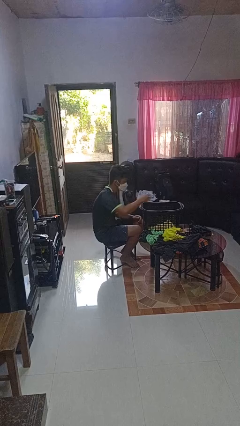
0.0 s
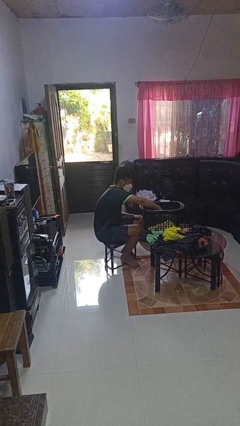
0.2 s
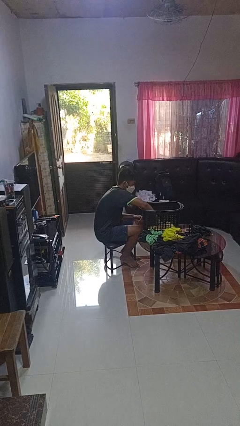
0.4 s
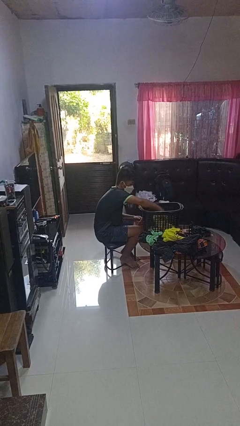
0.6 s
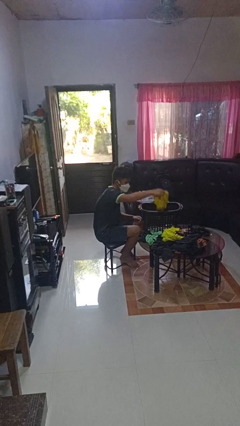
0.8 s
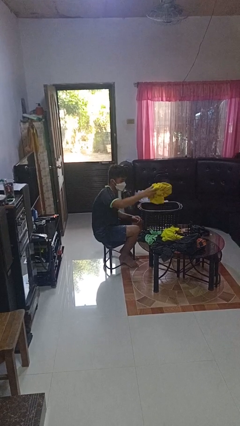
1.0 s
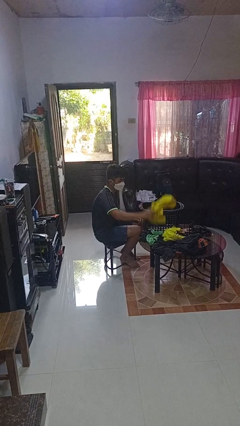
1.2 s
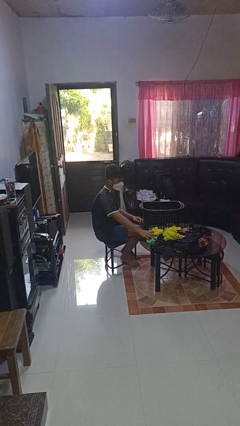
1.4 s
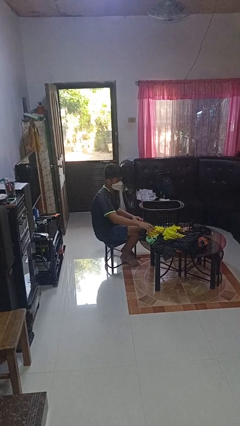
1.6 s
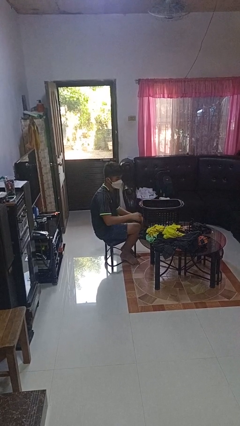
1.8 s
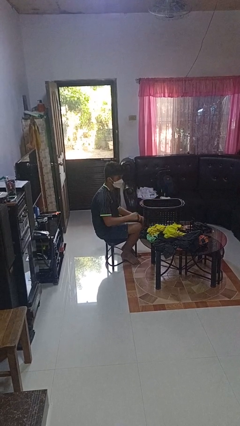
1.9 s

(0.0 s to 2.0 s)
person takes object from basket

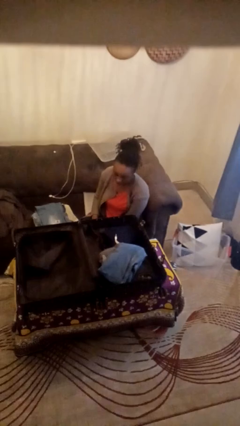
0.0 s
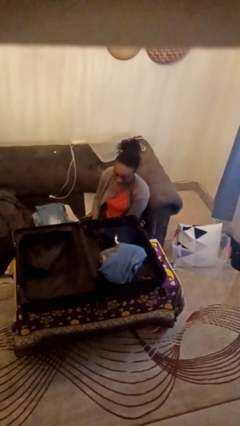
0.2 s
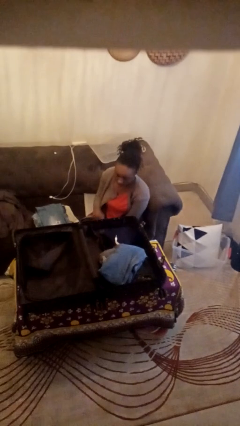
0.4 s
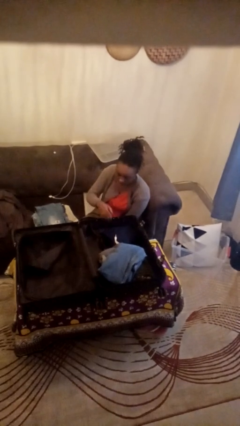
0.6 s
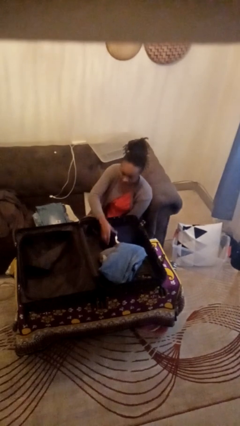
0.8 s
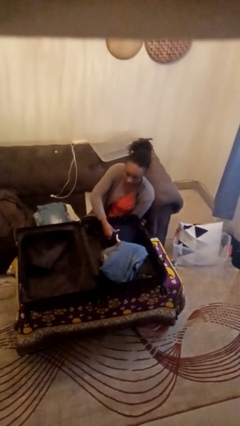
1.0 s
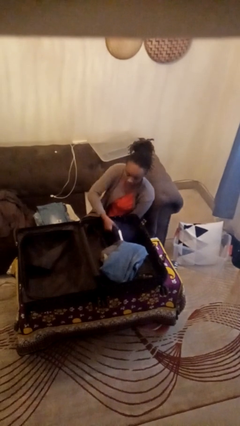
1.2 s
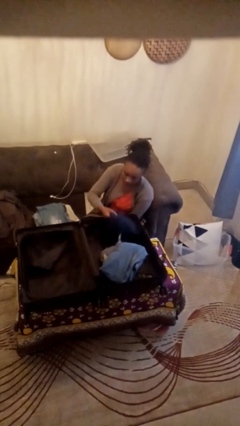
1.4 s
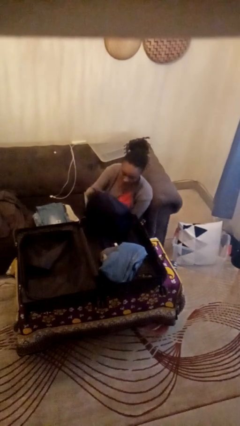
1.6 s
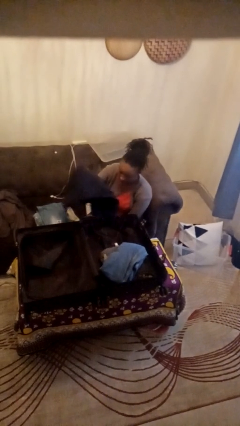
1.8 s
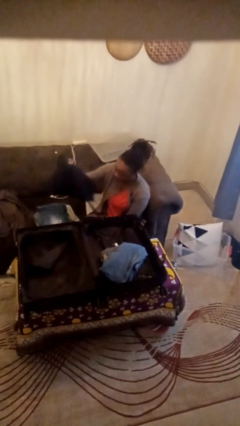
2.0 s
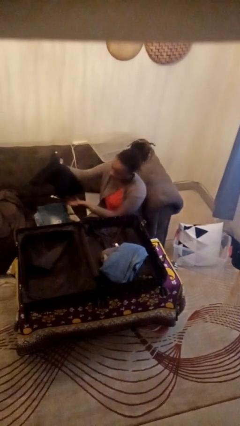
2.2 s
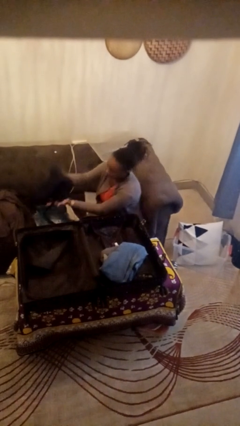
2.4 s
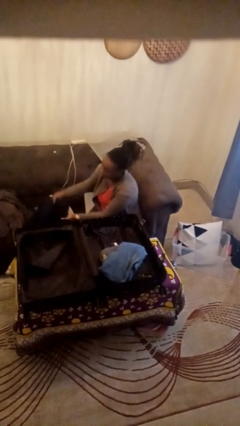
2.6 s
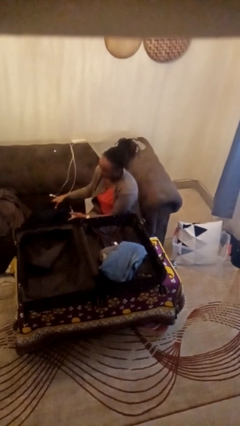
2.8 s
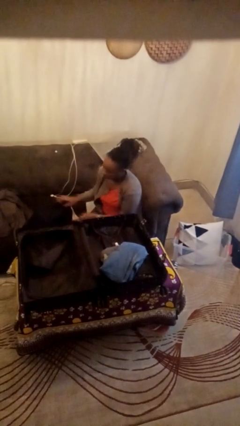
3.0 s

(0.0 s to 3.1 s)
person unloads clothes from suitcase

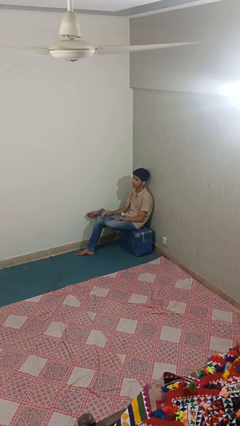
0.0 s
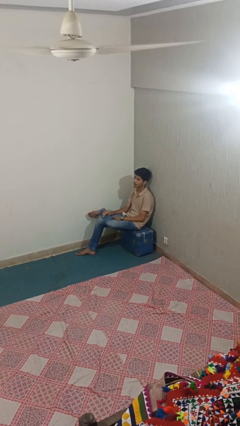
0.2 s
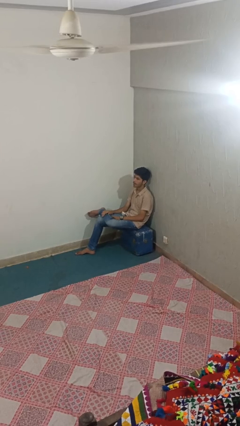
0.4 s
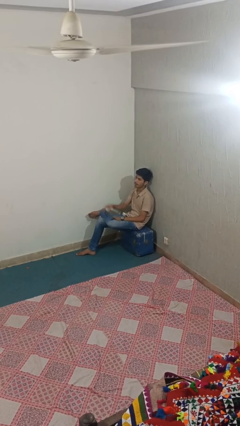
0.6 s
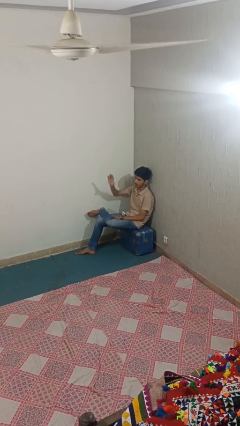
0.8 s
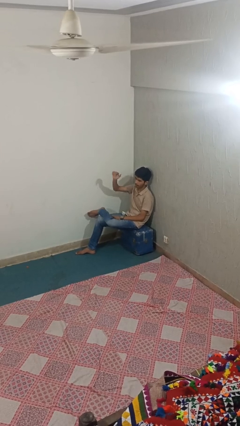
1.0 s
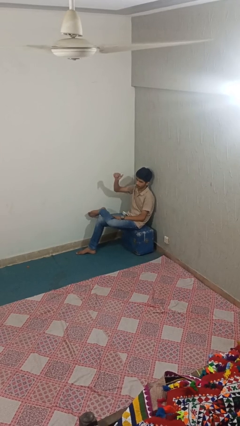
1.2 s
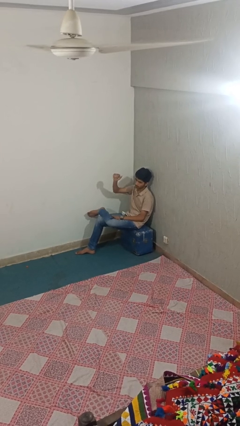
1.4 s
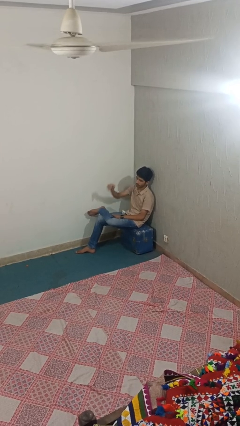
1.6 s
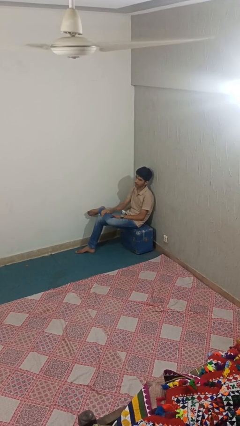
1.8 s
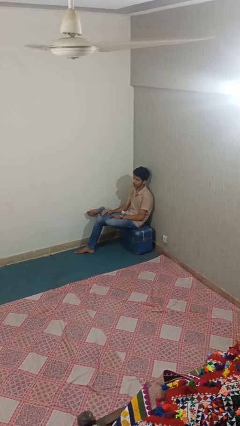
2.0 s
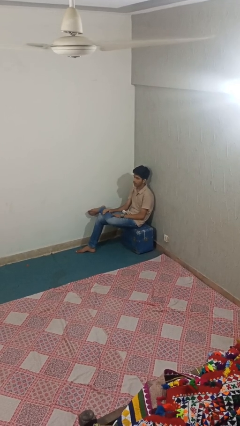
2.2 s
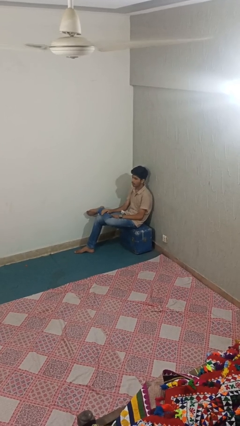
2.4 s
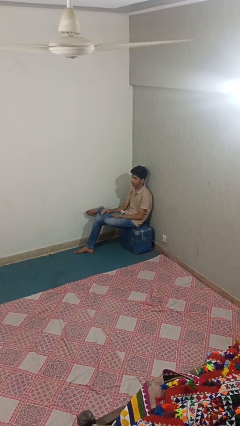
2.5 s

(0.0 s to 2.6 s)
person gestures come here

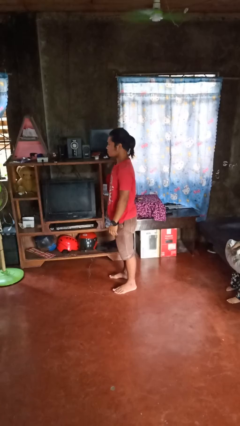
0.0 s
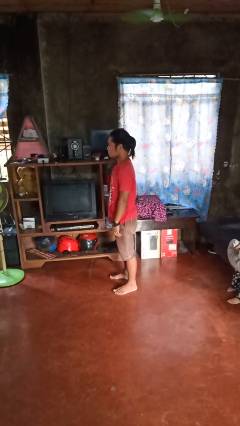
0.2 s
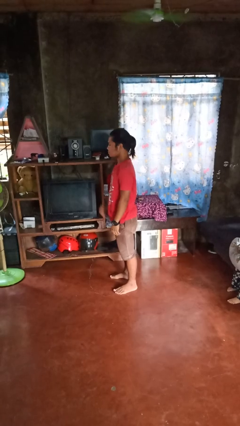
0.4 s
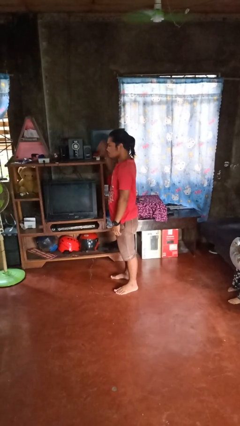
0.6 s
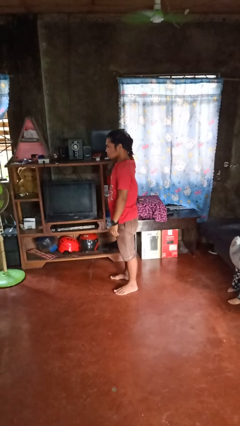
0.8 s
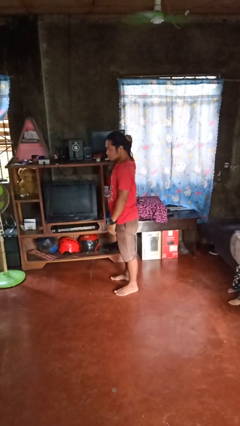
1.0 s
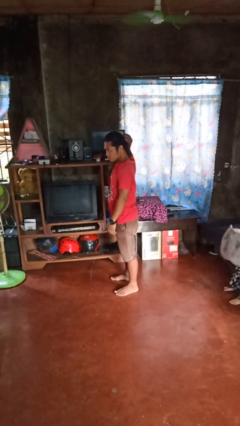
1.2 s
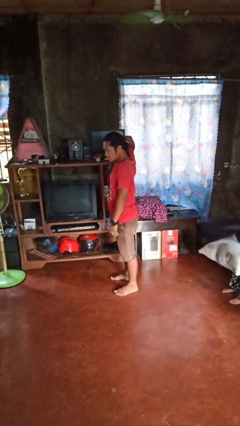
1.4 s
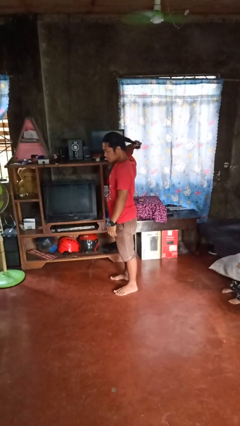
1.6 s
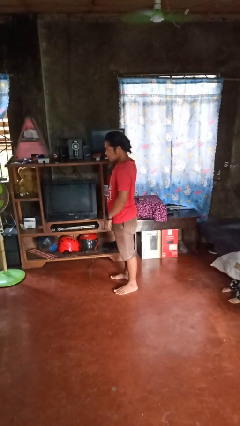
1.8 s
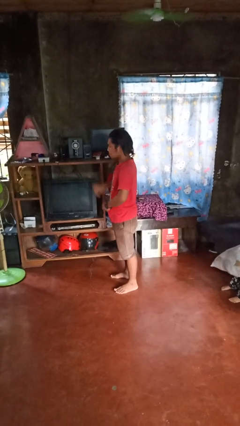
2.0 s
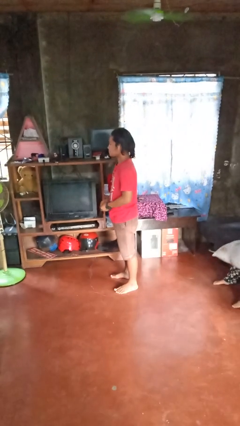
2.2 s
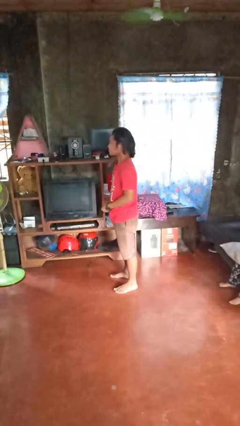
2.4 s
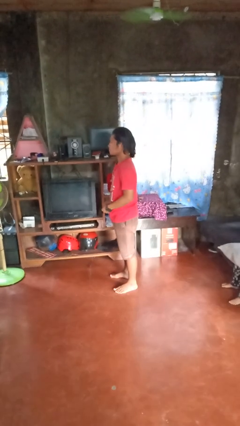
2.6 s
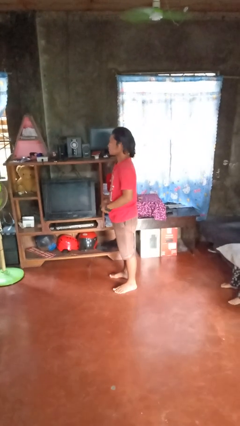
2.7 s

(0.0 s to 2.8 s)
person takes off hairtie

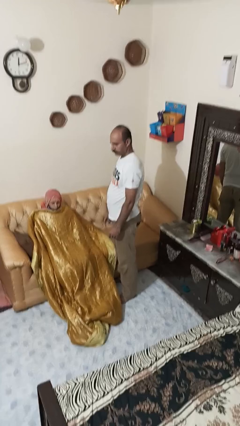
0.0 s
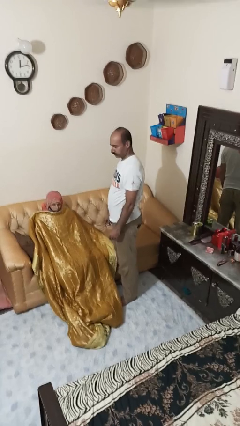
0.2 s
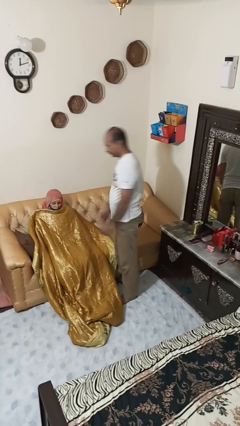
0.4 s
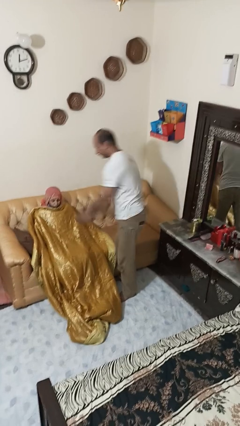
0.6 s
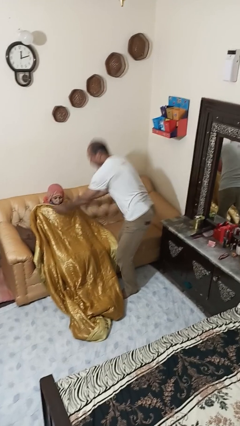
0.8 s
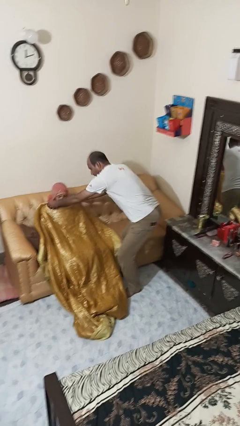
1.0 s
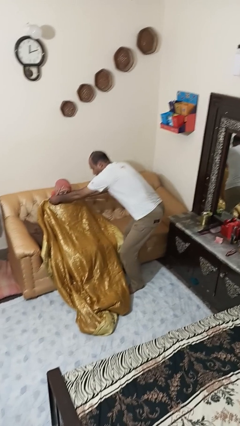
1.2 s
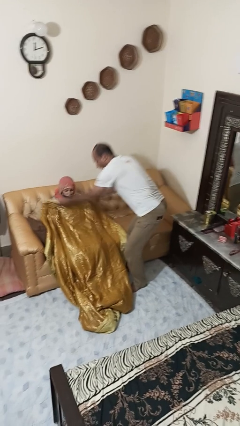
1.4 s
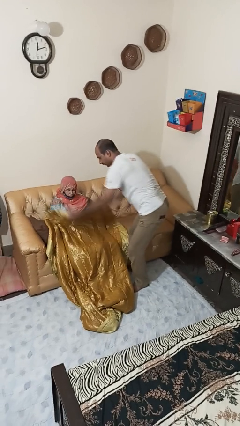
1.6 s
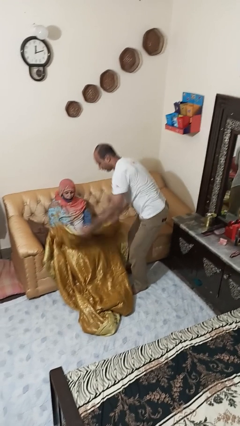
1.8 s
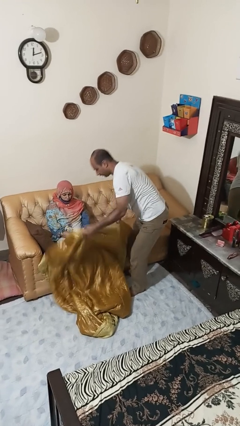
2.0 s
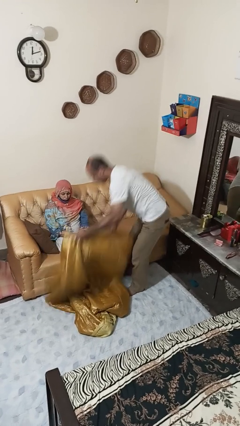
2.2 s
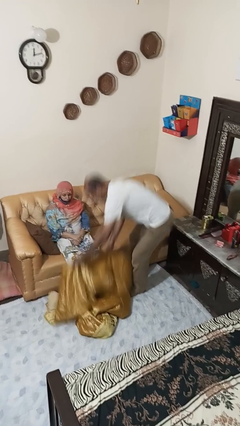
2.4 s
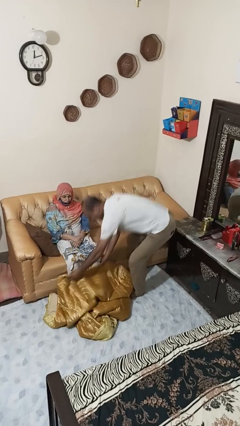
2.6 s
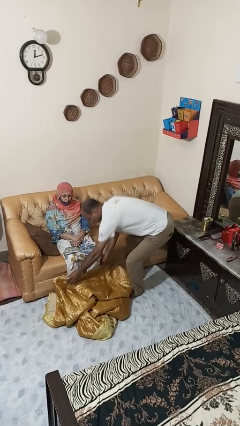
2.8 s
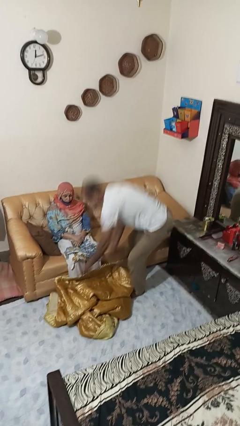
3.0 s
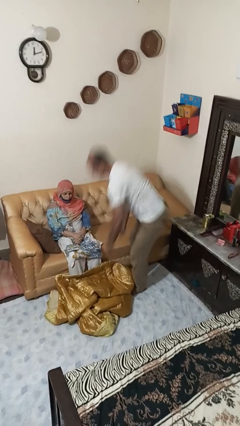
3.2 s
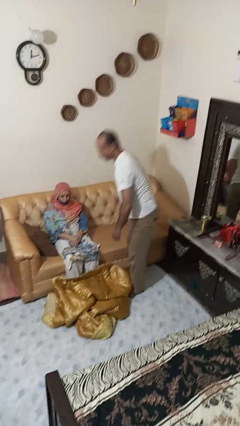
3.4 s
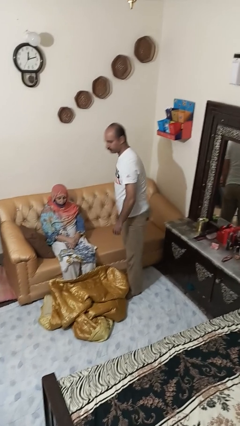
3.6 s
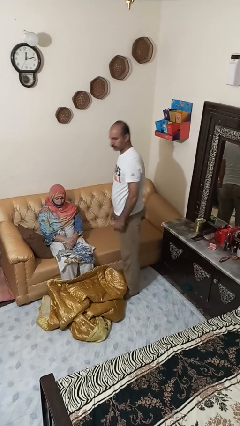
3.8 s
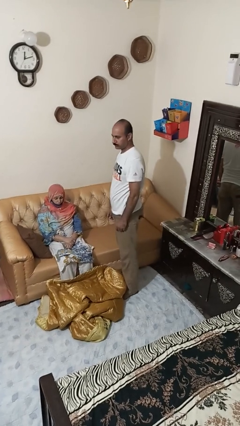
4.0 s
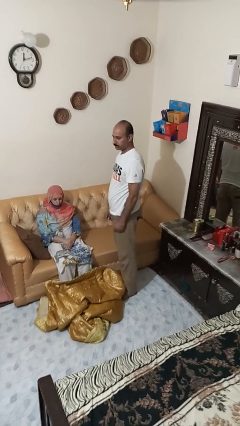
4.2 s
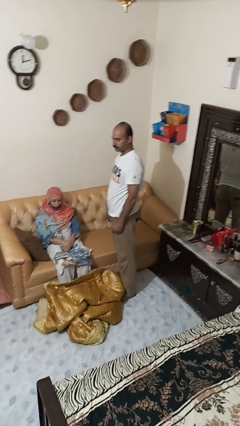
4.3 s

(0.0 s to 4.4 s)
person uncovers friend with blanket

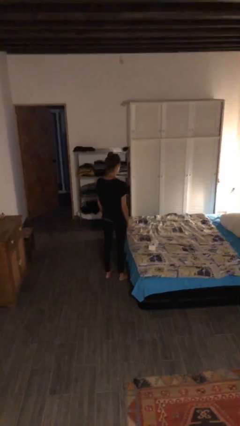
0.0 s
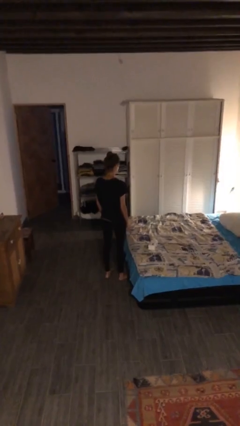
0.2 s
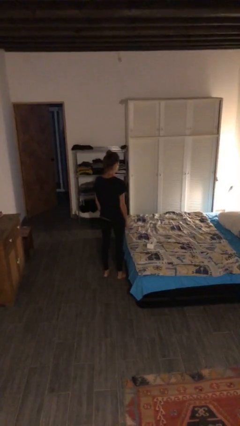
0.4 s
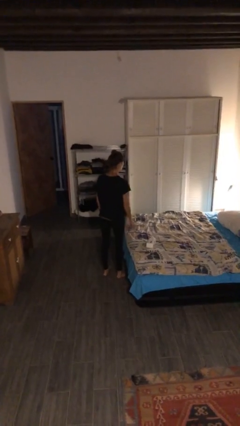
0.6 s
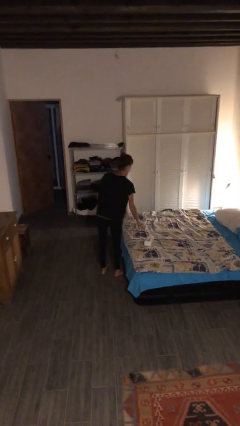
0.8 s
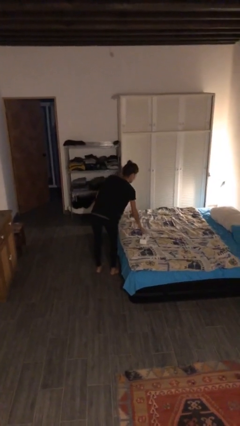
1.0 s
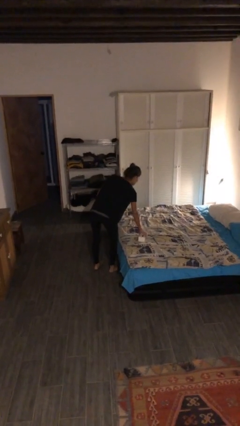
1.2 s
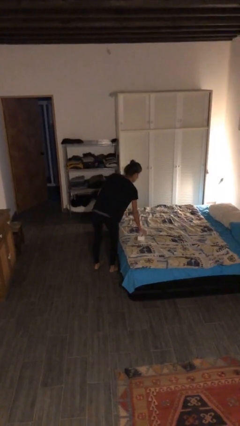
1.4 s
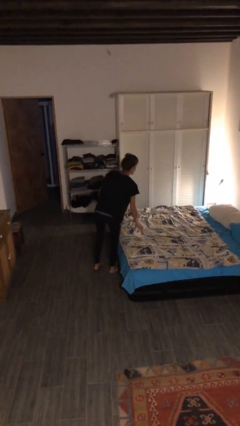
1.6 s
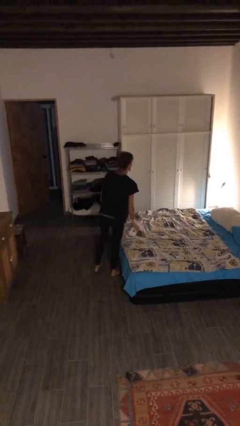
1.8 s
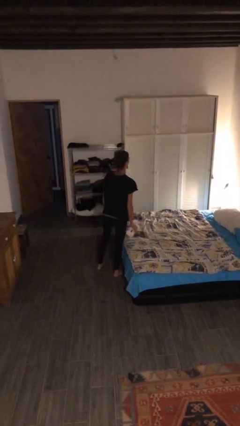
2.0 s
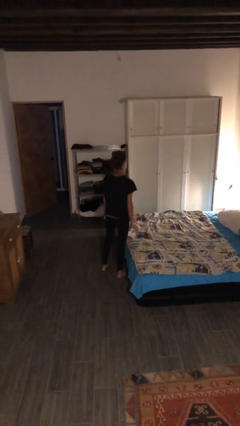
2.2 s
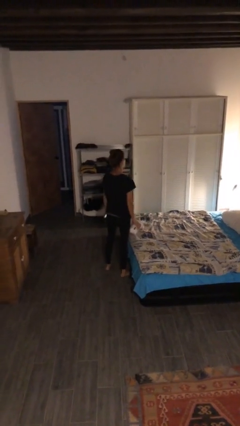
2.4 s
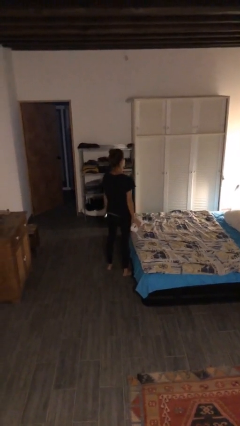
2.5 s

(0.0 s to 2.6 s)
person picks up object from bed

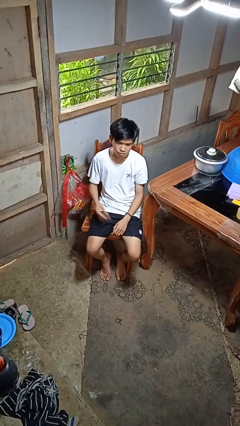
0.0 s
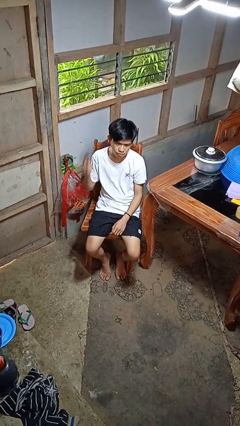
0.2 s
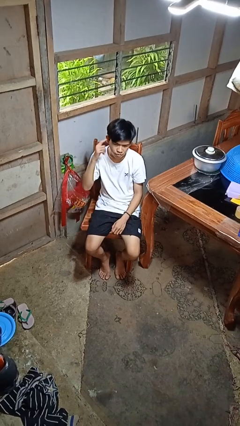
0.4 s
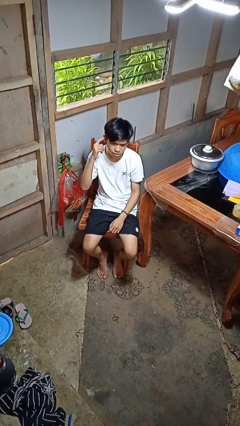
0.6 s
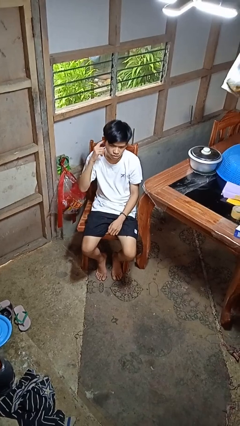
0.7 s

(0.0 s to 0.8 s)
person gestures listen closely
